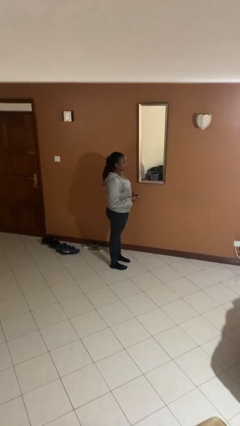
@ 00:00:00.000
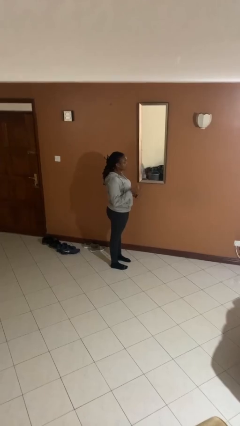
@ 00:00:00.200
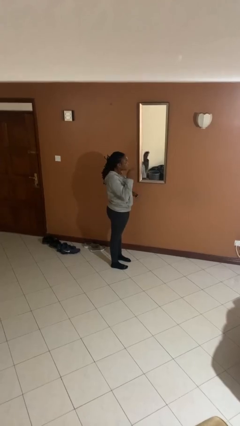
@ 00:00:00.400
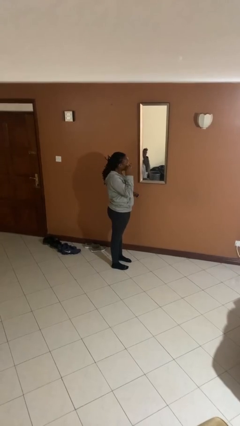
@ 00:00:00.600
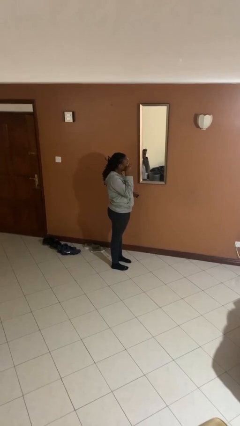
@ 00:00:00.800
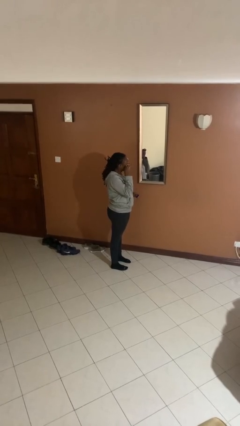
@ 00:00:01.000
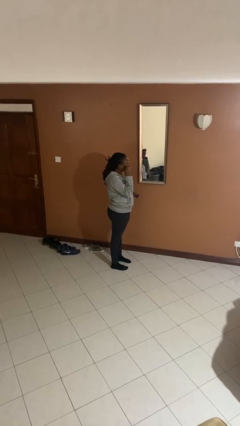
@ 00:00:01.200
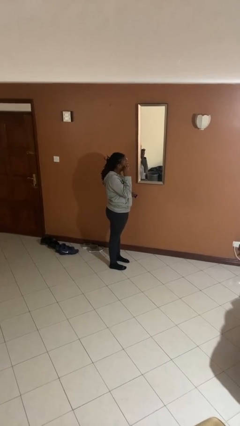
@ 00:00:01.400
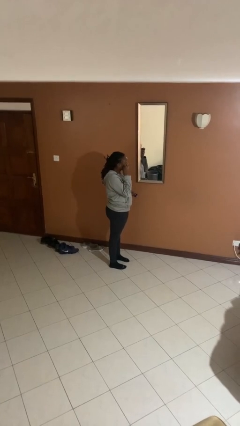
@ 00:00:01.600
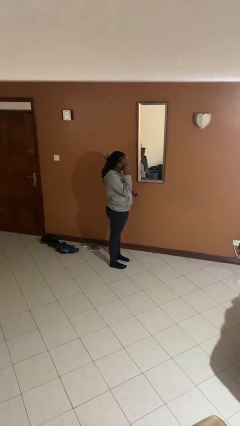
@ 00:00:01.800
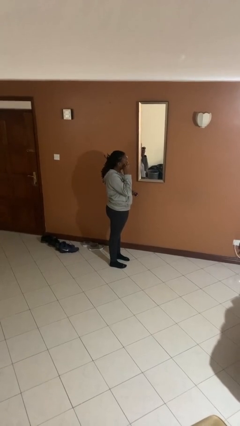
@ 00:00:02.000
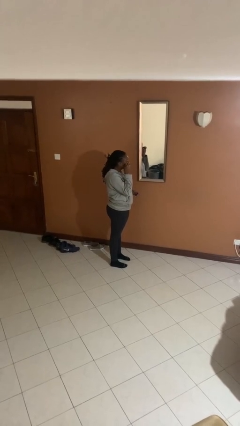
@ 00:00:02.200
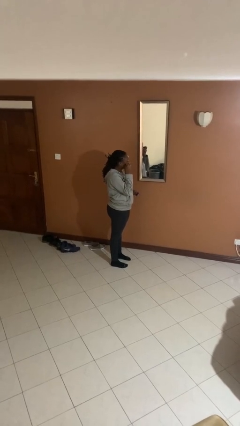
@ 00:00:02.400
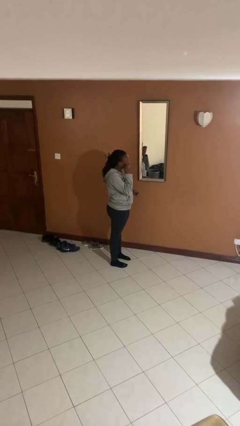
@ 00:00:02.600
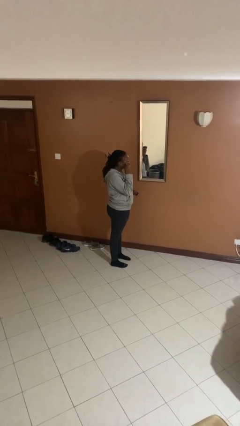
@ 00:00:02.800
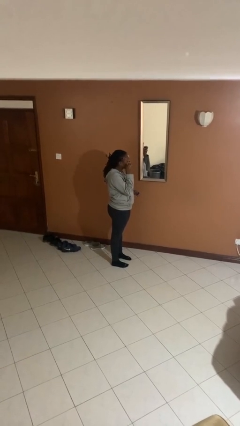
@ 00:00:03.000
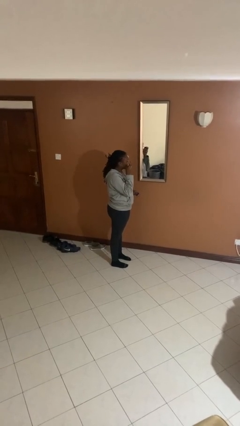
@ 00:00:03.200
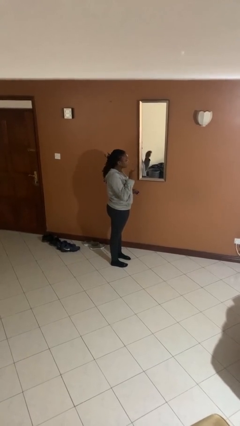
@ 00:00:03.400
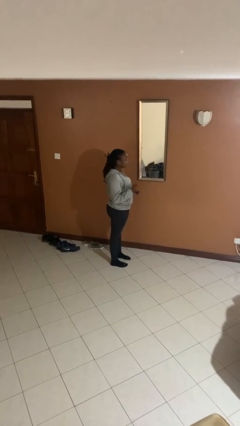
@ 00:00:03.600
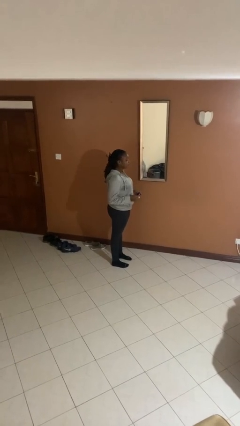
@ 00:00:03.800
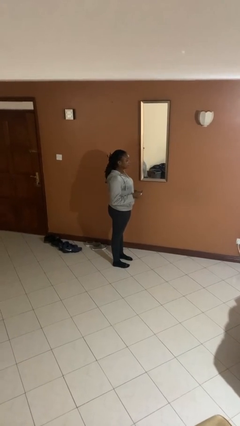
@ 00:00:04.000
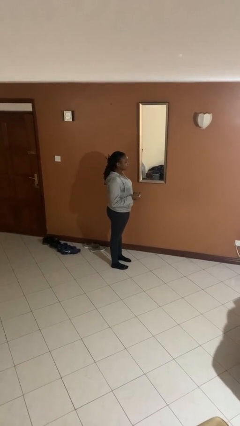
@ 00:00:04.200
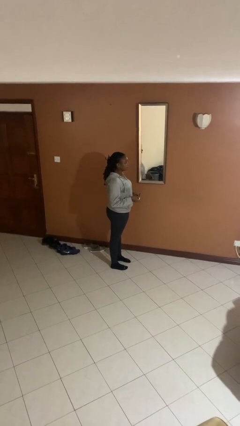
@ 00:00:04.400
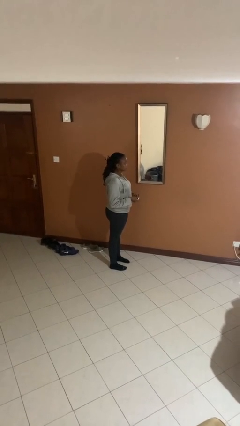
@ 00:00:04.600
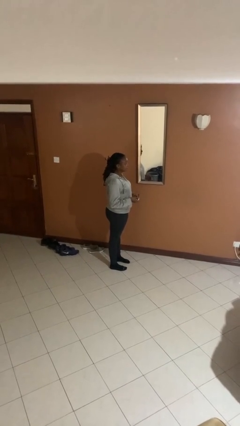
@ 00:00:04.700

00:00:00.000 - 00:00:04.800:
person applies eye makeup

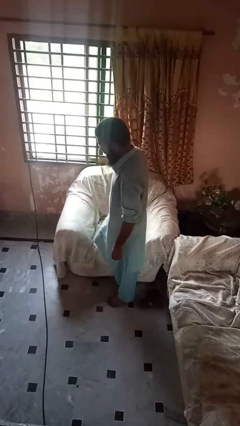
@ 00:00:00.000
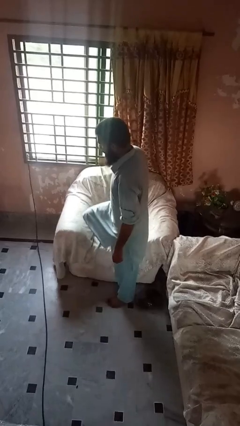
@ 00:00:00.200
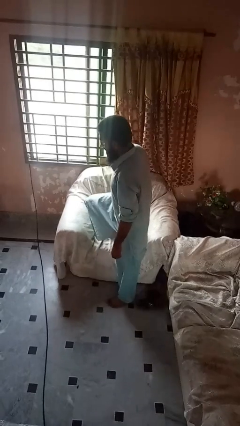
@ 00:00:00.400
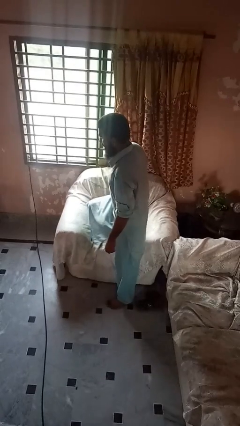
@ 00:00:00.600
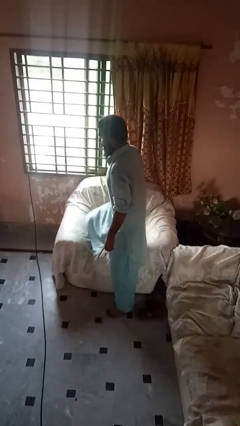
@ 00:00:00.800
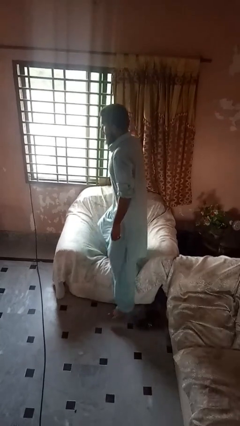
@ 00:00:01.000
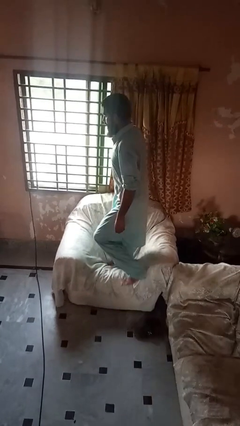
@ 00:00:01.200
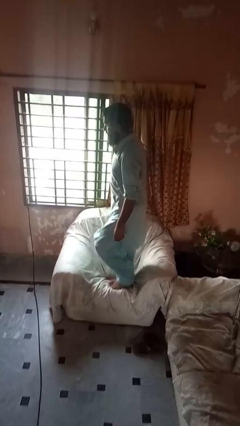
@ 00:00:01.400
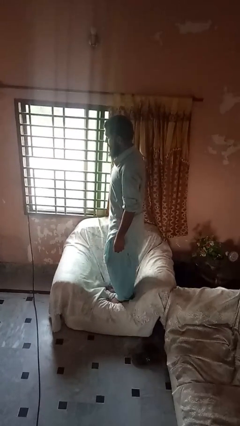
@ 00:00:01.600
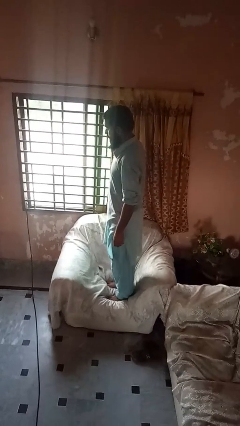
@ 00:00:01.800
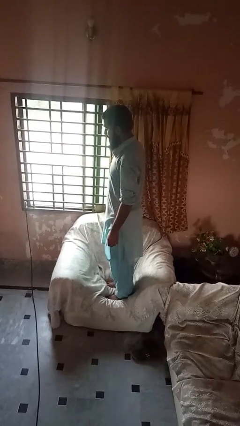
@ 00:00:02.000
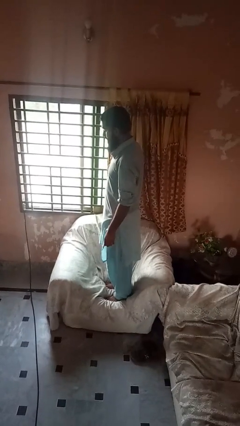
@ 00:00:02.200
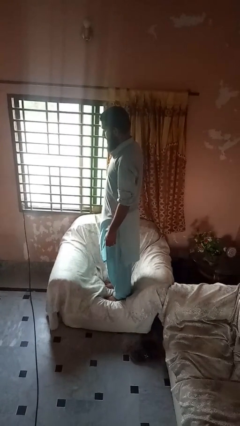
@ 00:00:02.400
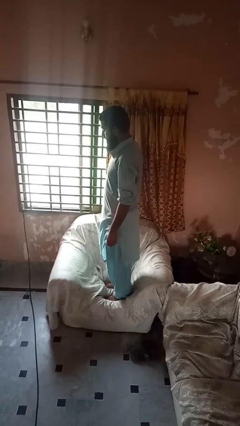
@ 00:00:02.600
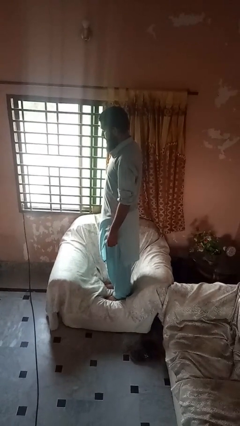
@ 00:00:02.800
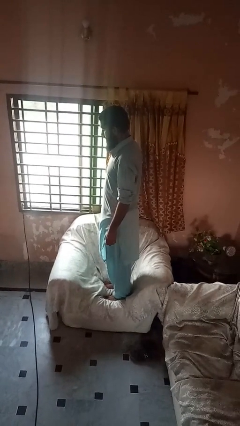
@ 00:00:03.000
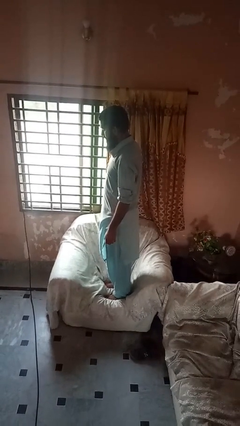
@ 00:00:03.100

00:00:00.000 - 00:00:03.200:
person climbs on couch

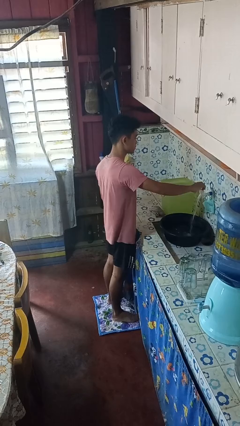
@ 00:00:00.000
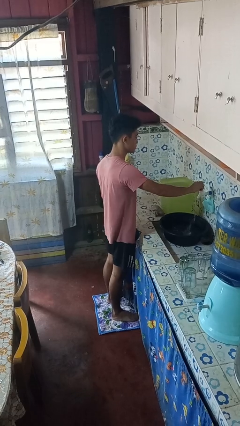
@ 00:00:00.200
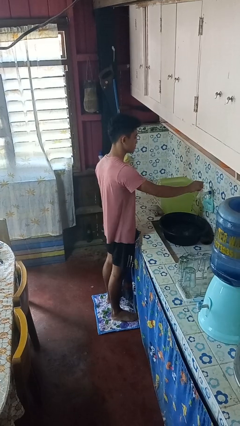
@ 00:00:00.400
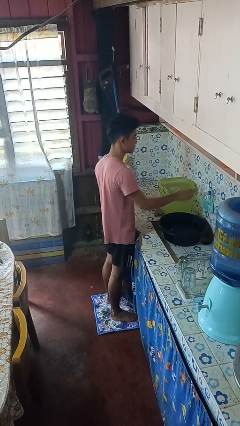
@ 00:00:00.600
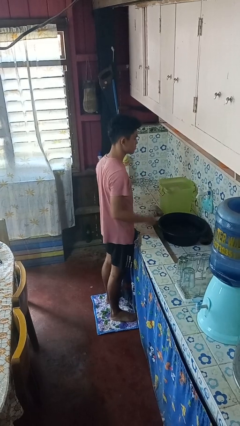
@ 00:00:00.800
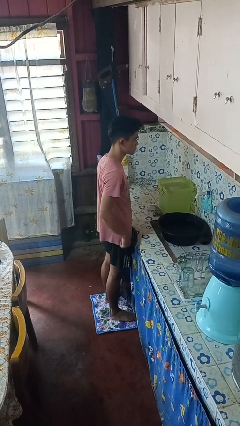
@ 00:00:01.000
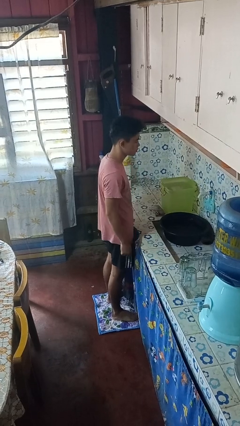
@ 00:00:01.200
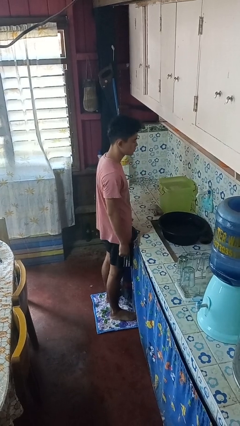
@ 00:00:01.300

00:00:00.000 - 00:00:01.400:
person turns off faucet

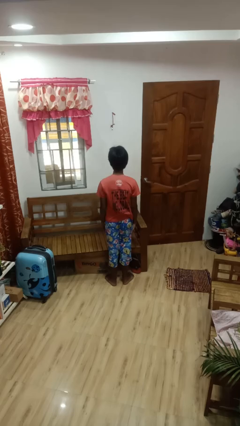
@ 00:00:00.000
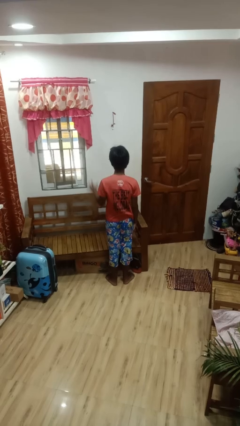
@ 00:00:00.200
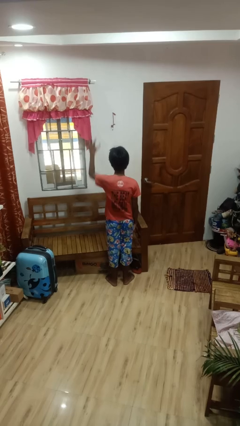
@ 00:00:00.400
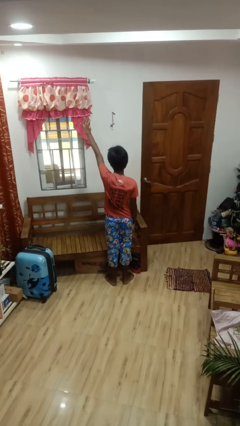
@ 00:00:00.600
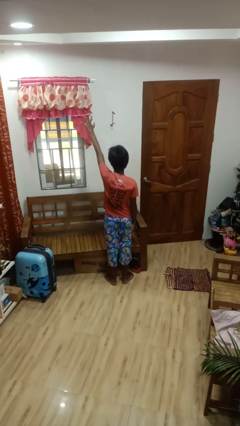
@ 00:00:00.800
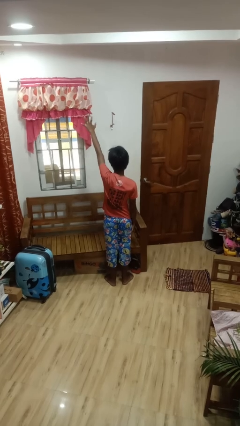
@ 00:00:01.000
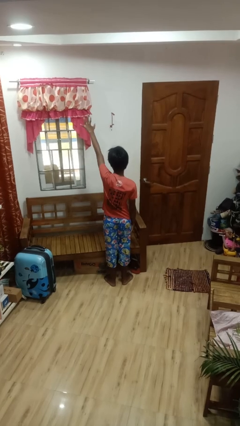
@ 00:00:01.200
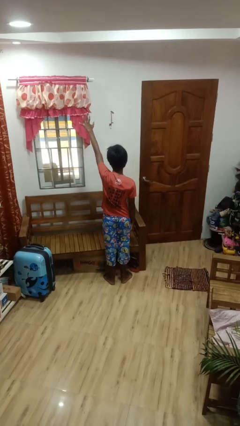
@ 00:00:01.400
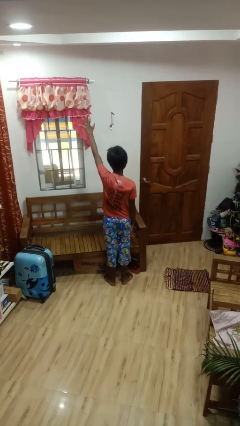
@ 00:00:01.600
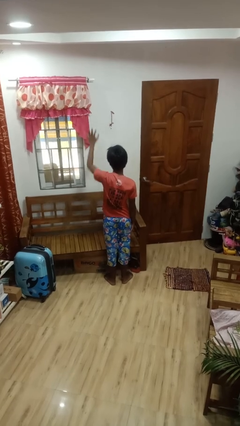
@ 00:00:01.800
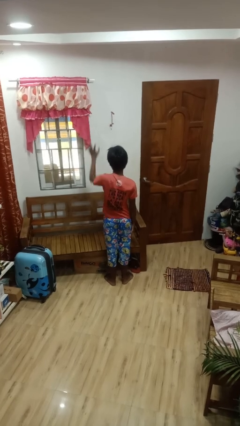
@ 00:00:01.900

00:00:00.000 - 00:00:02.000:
person gestures number five

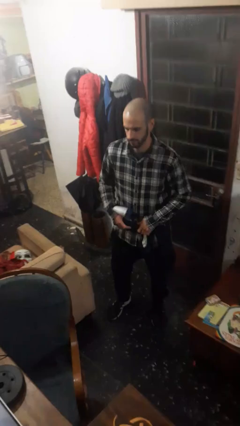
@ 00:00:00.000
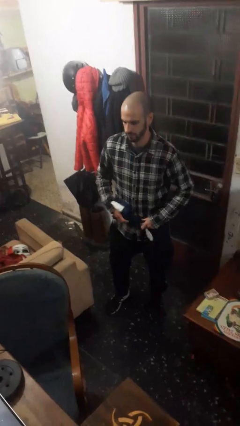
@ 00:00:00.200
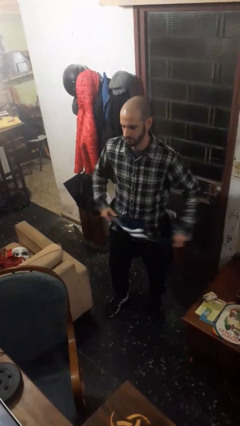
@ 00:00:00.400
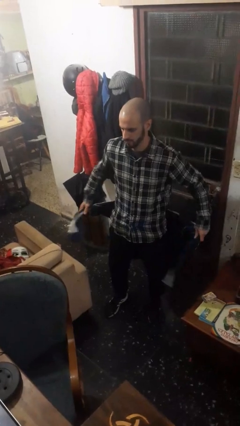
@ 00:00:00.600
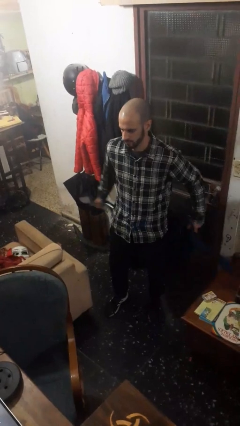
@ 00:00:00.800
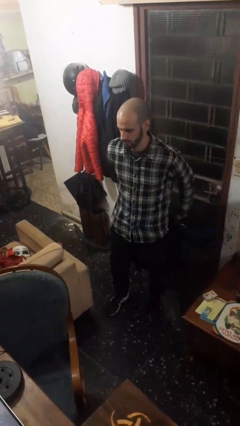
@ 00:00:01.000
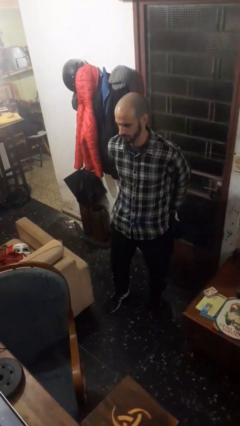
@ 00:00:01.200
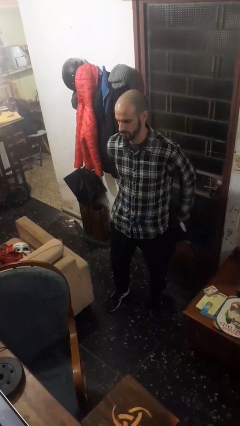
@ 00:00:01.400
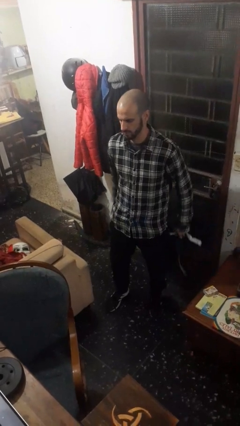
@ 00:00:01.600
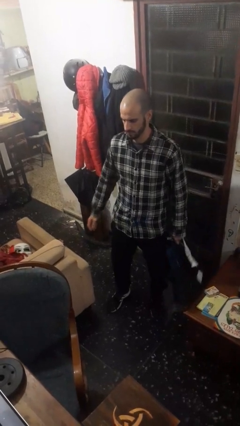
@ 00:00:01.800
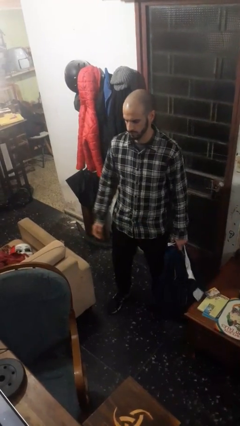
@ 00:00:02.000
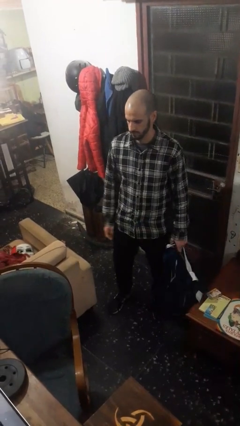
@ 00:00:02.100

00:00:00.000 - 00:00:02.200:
person unties jacket around waist

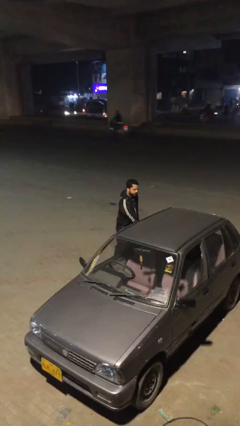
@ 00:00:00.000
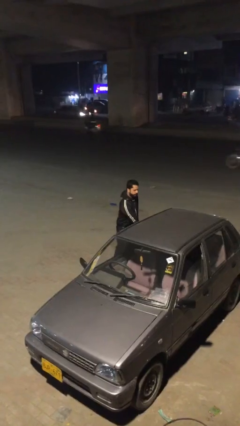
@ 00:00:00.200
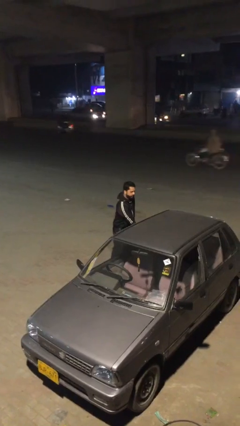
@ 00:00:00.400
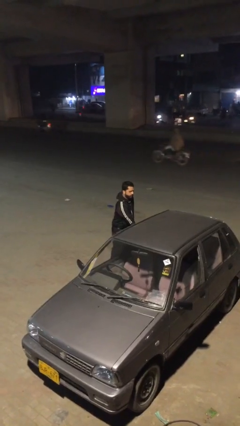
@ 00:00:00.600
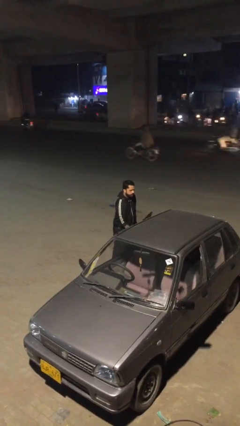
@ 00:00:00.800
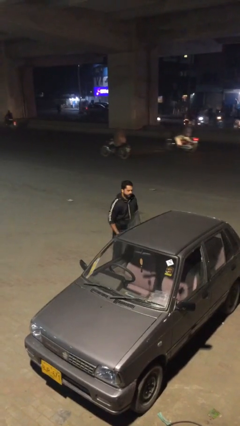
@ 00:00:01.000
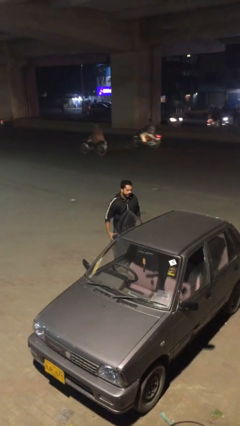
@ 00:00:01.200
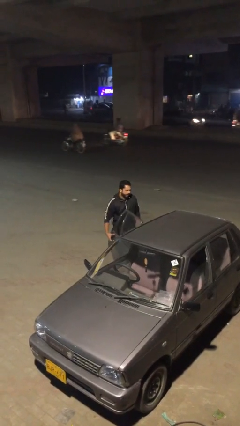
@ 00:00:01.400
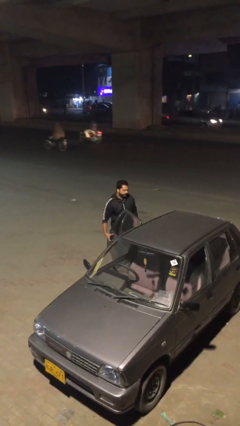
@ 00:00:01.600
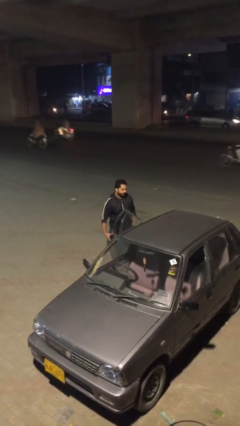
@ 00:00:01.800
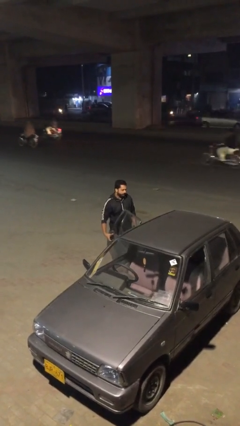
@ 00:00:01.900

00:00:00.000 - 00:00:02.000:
person opens car door

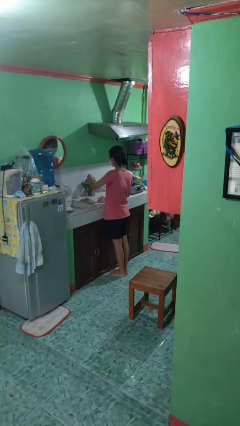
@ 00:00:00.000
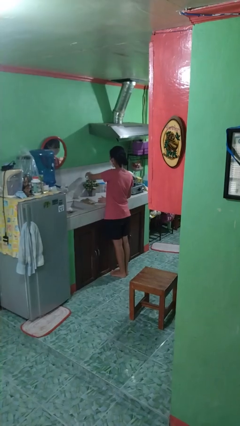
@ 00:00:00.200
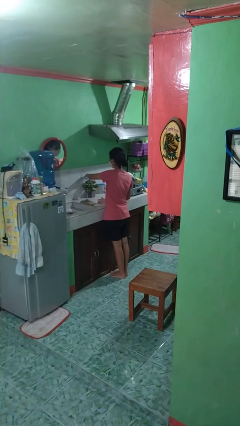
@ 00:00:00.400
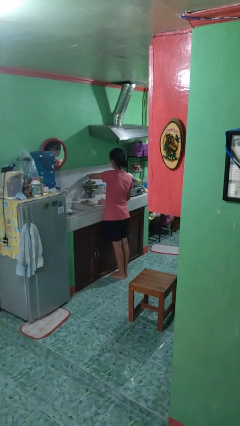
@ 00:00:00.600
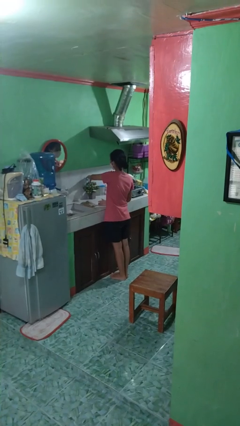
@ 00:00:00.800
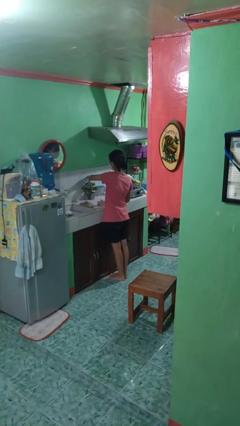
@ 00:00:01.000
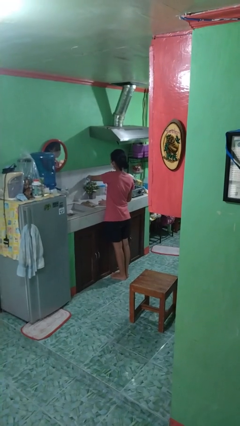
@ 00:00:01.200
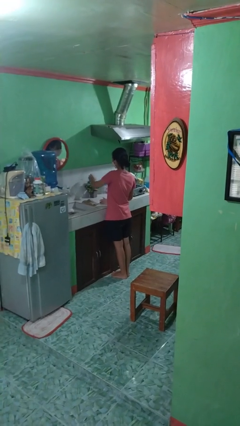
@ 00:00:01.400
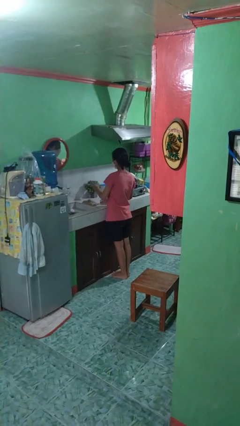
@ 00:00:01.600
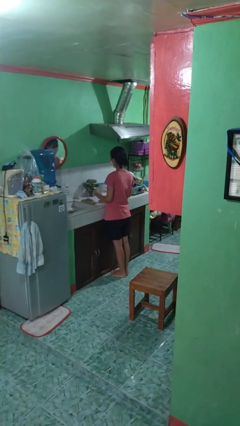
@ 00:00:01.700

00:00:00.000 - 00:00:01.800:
person waters houseplant
